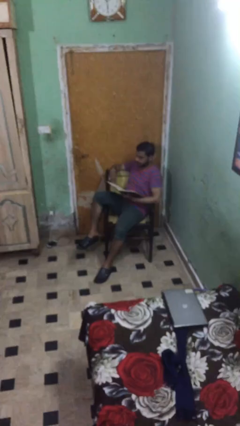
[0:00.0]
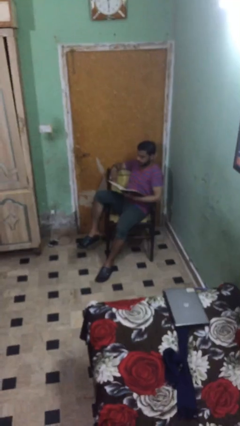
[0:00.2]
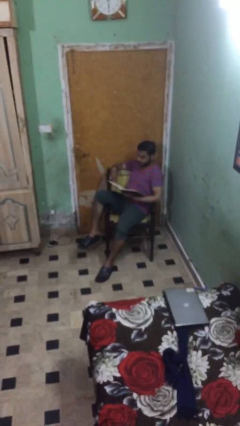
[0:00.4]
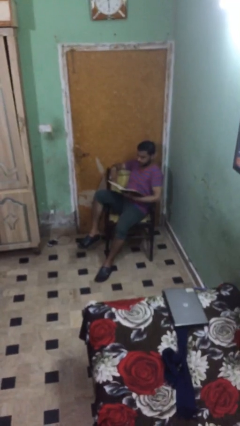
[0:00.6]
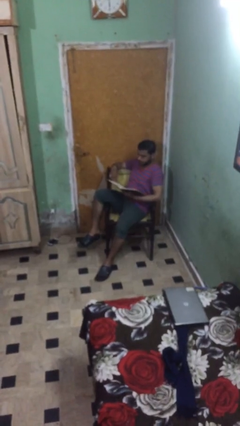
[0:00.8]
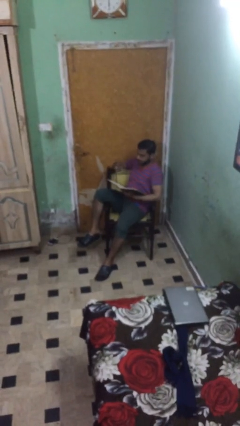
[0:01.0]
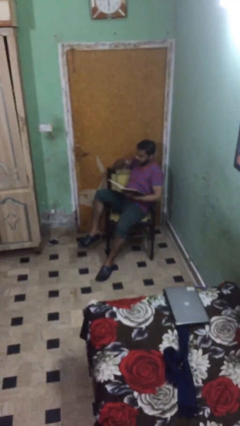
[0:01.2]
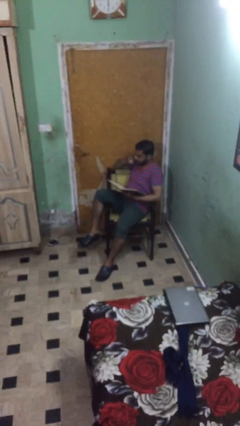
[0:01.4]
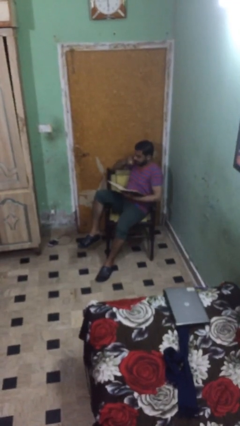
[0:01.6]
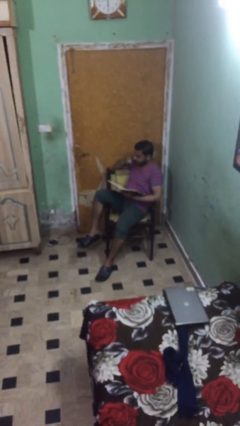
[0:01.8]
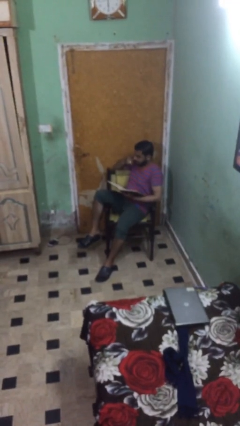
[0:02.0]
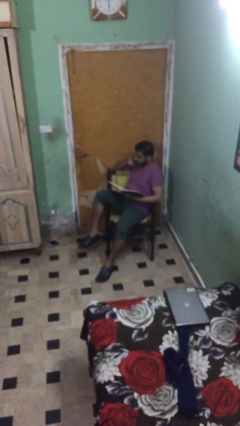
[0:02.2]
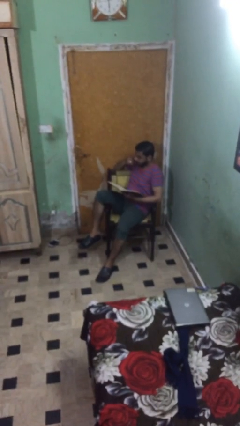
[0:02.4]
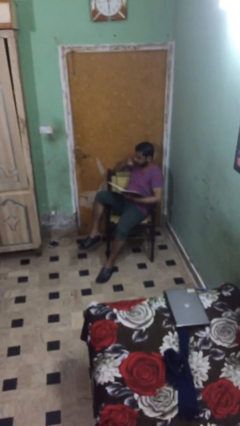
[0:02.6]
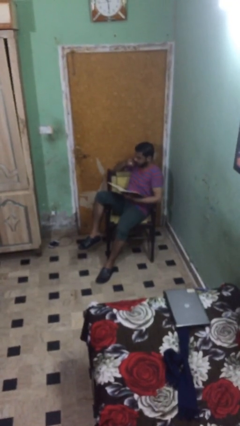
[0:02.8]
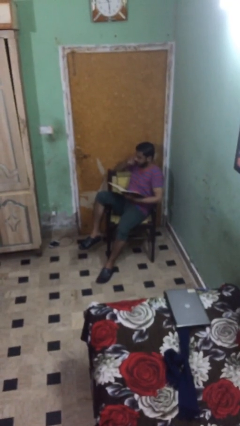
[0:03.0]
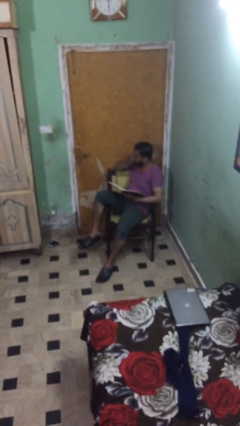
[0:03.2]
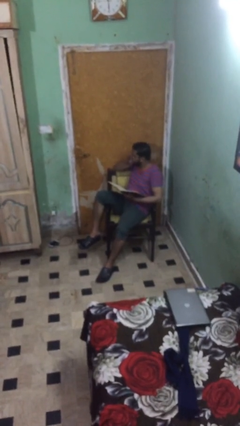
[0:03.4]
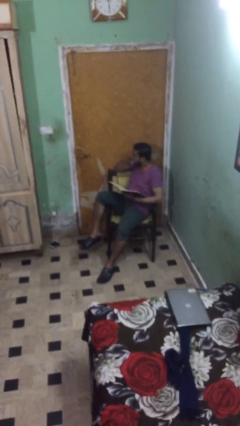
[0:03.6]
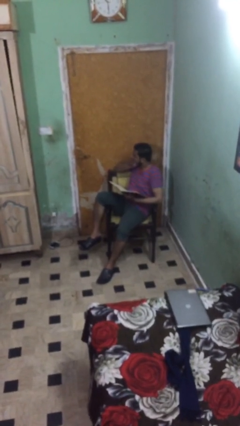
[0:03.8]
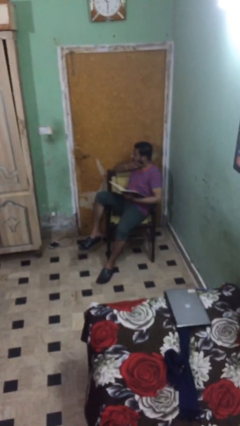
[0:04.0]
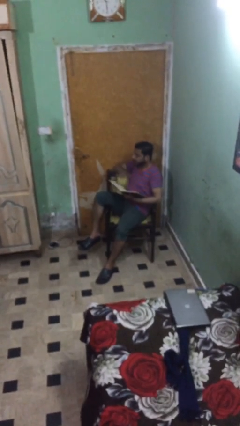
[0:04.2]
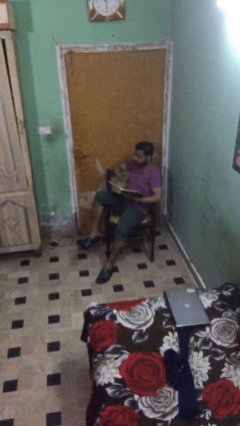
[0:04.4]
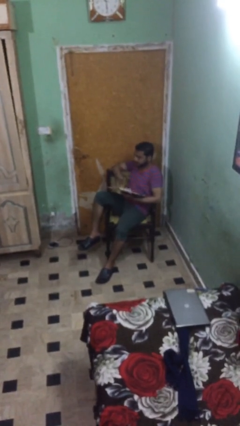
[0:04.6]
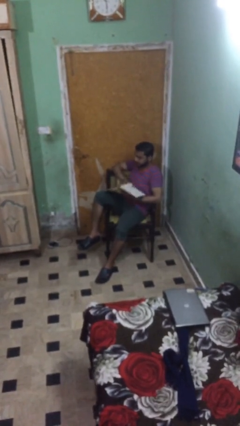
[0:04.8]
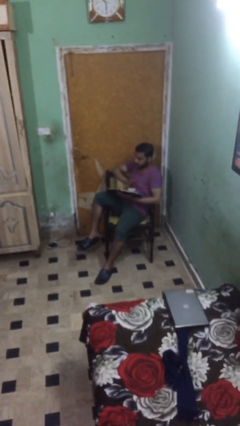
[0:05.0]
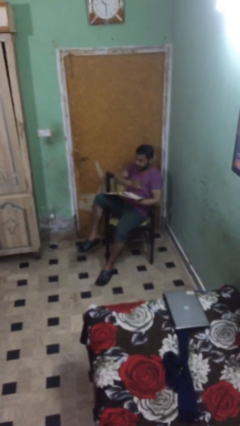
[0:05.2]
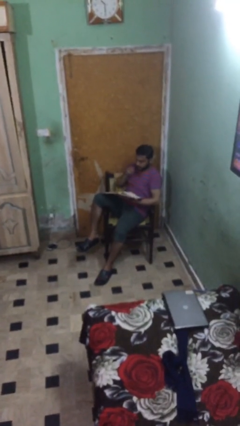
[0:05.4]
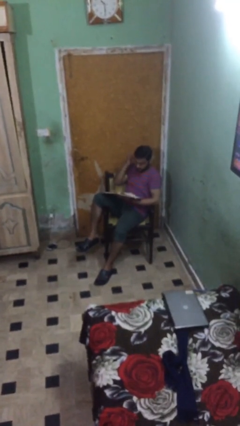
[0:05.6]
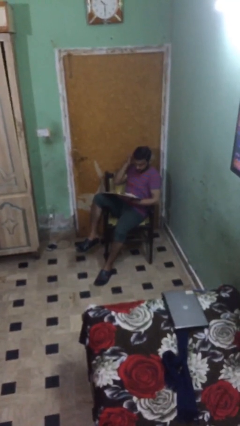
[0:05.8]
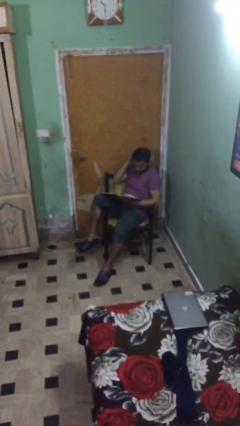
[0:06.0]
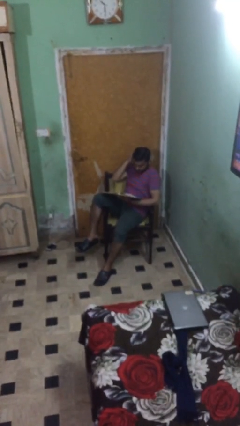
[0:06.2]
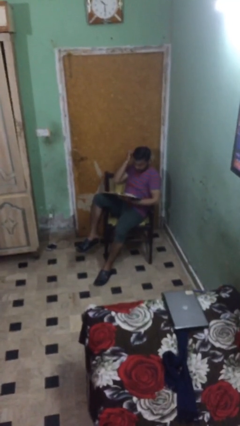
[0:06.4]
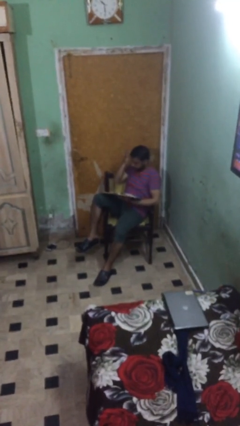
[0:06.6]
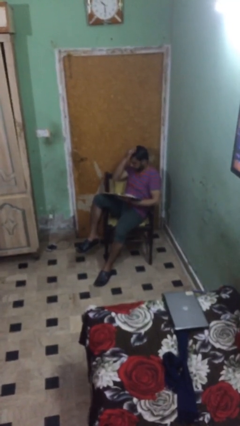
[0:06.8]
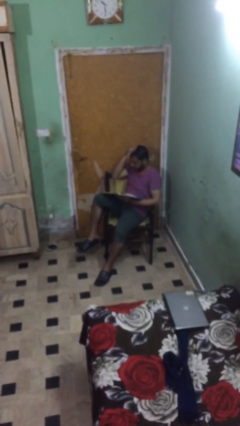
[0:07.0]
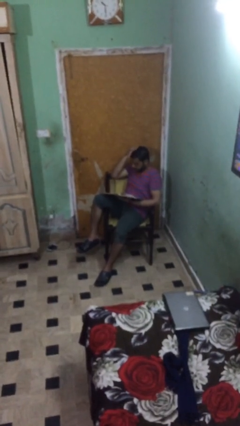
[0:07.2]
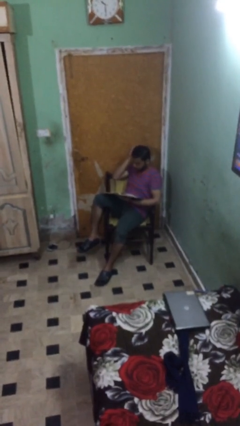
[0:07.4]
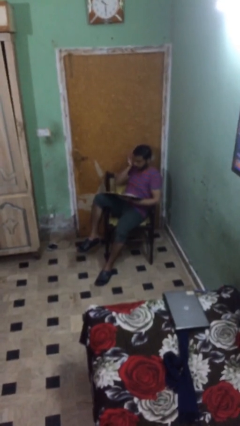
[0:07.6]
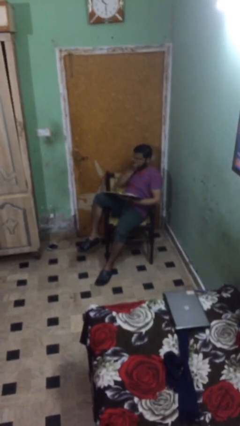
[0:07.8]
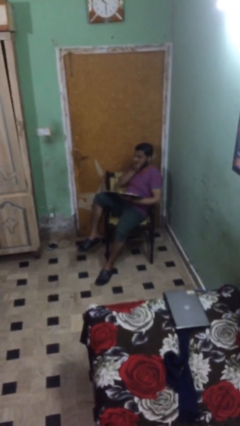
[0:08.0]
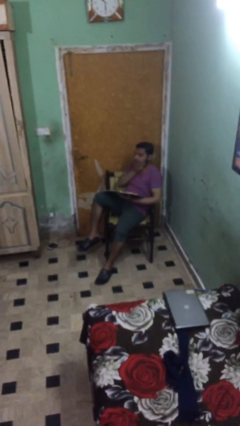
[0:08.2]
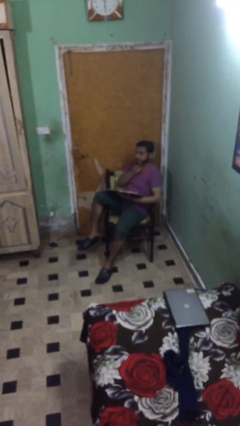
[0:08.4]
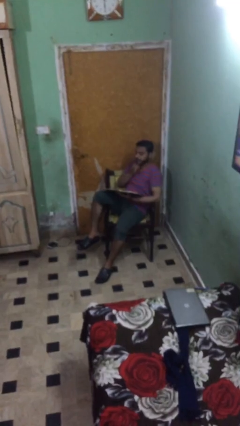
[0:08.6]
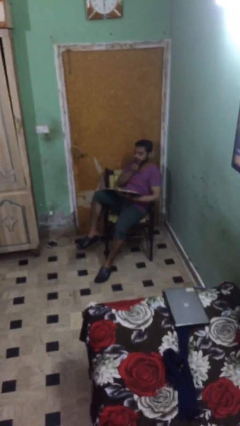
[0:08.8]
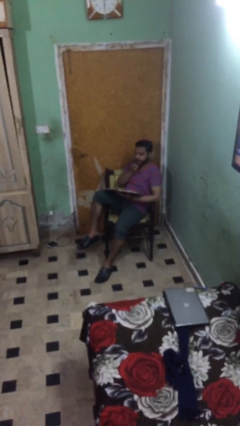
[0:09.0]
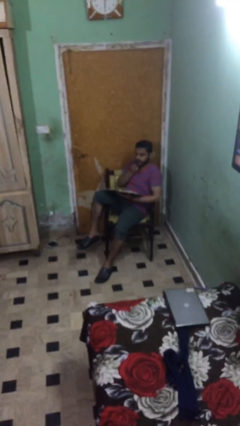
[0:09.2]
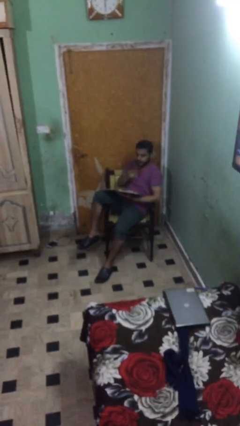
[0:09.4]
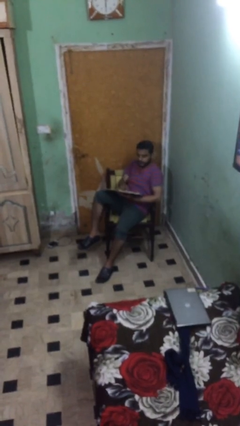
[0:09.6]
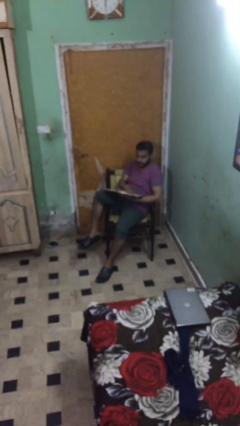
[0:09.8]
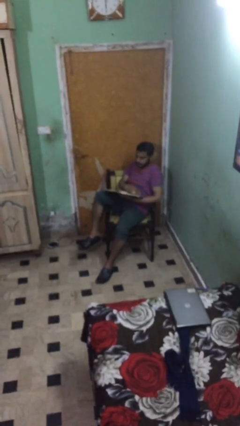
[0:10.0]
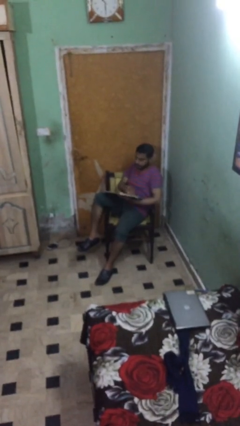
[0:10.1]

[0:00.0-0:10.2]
person reads document

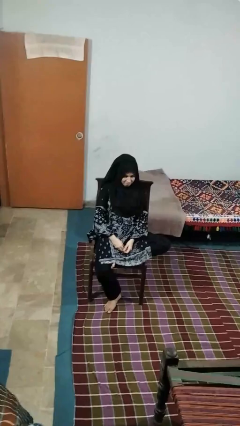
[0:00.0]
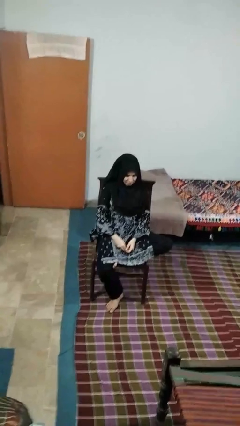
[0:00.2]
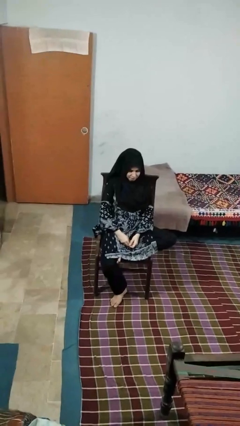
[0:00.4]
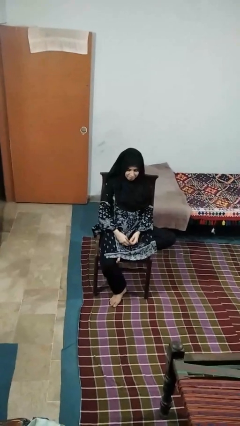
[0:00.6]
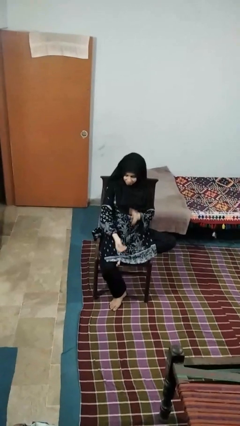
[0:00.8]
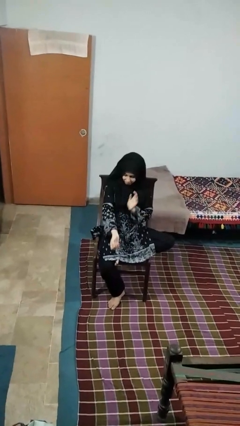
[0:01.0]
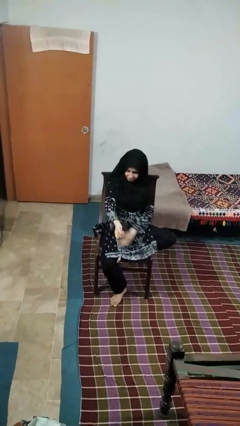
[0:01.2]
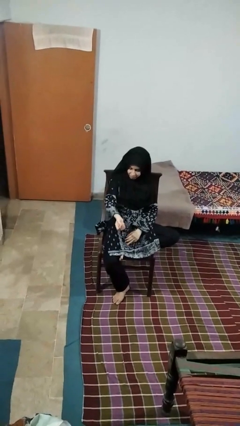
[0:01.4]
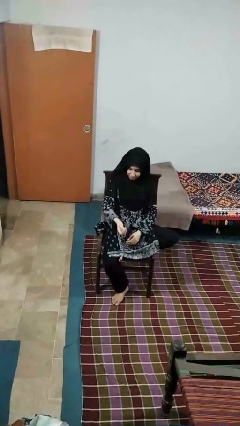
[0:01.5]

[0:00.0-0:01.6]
person swats bug

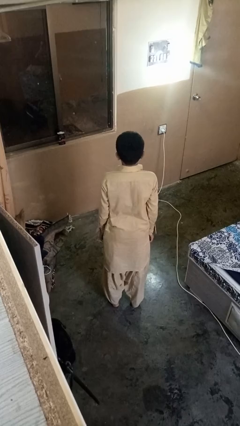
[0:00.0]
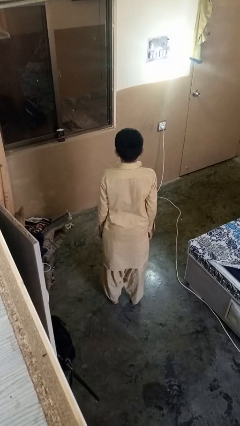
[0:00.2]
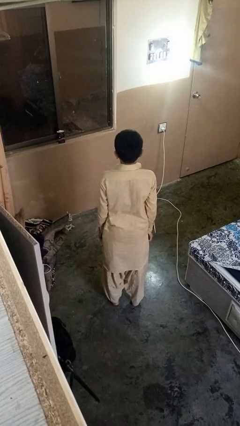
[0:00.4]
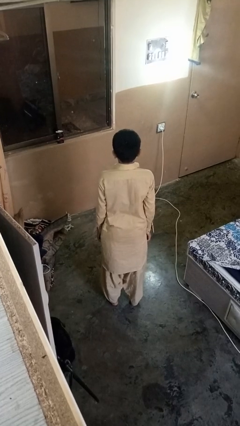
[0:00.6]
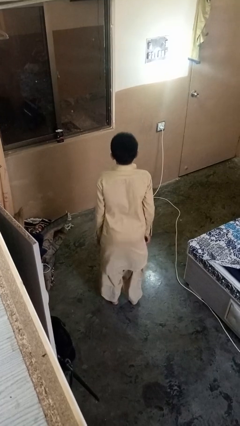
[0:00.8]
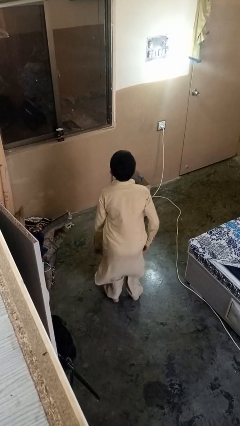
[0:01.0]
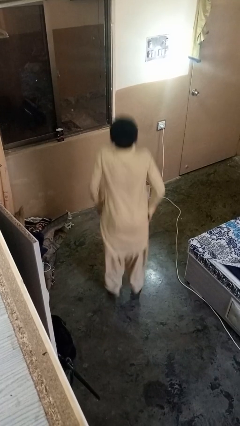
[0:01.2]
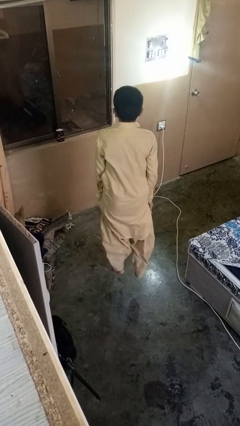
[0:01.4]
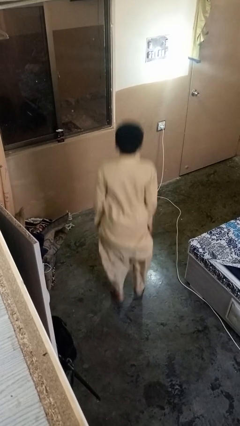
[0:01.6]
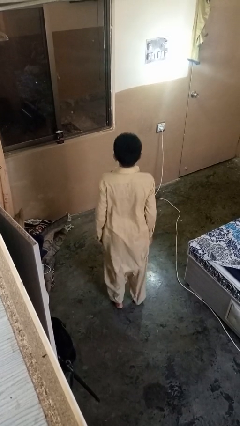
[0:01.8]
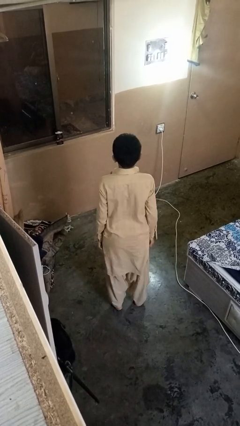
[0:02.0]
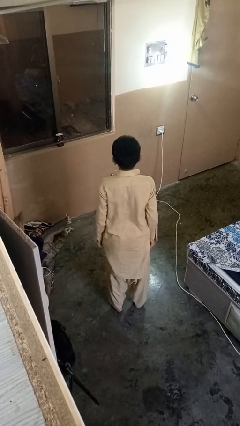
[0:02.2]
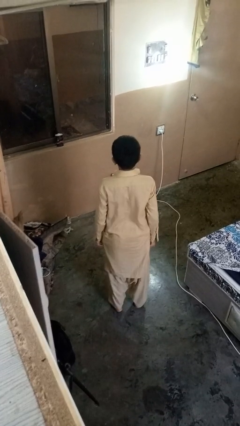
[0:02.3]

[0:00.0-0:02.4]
person jumps

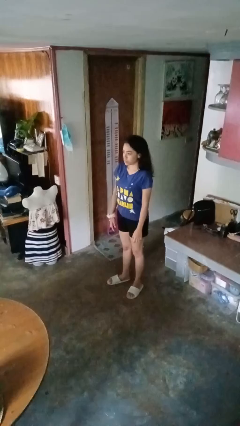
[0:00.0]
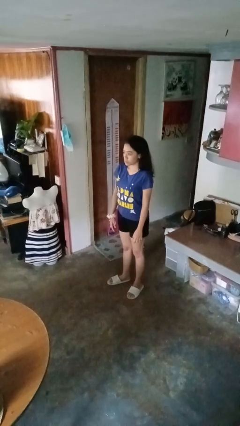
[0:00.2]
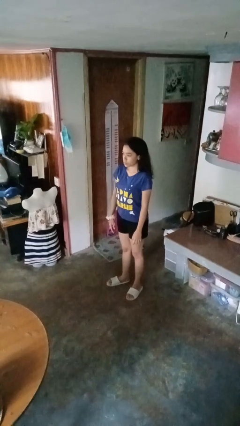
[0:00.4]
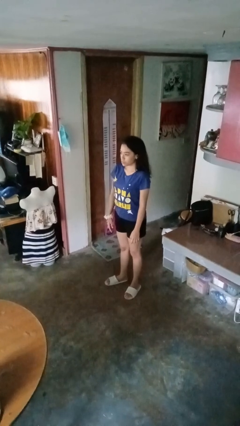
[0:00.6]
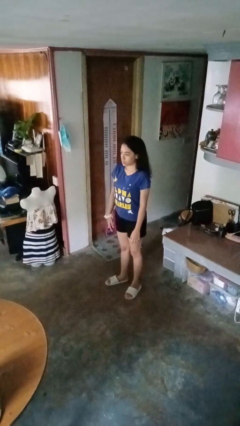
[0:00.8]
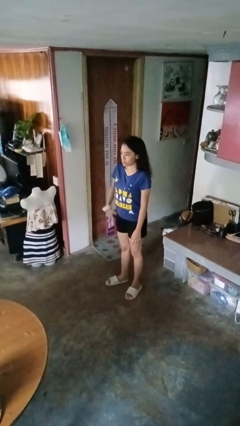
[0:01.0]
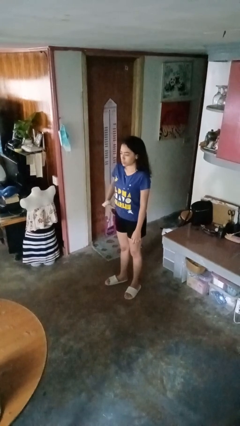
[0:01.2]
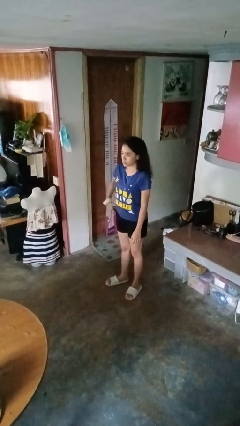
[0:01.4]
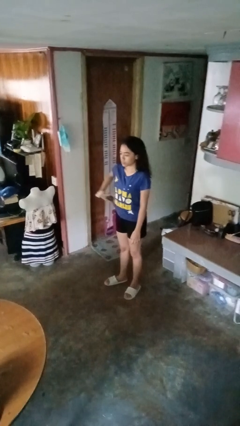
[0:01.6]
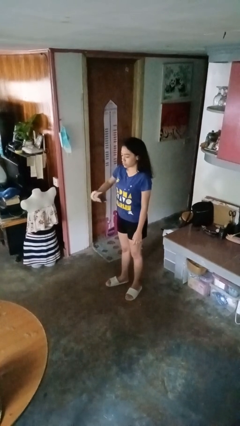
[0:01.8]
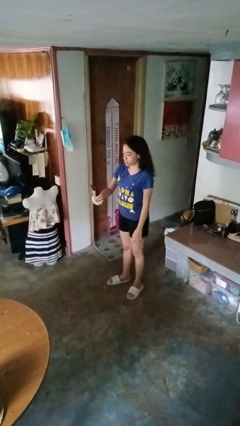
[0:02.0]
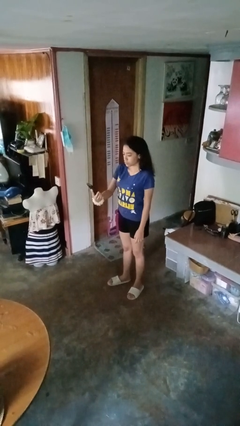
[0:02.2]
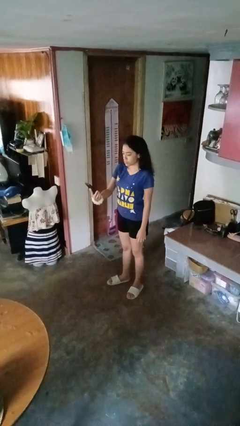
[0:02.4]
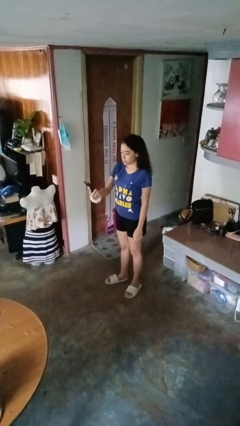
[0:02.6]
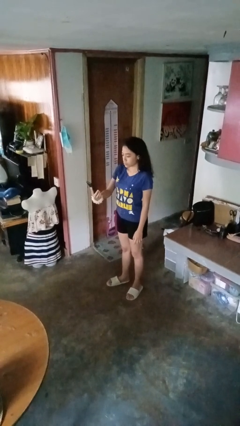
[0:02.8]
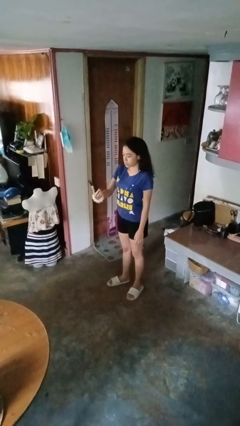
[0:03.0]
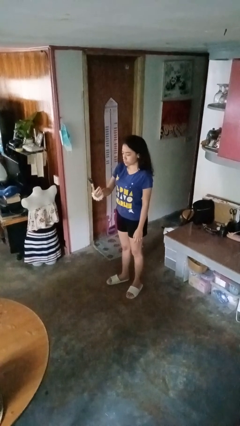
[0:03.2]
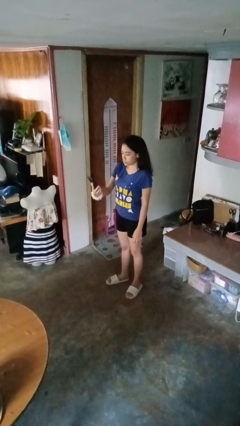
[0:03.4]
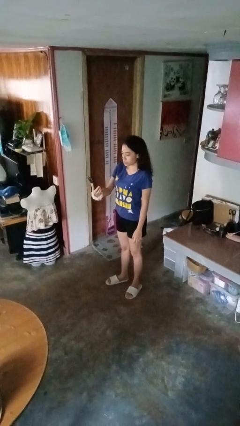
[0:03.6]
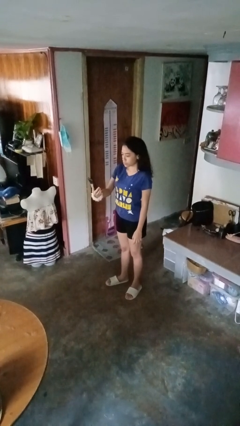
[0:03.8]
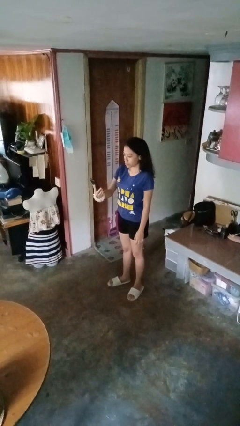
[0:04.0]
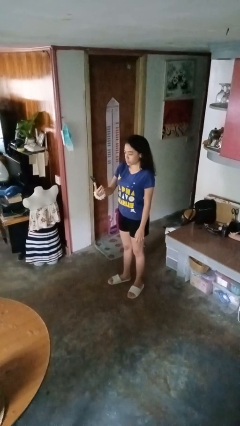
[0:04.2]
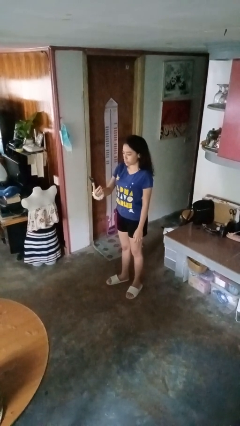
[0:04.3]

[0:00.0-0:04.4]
person takes phone from pocket
